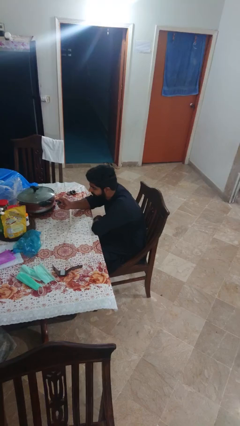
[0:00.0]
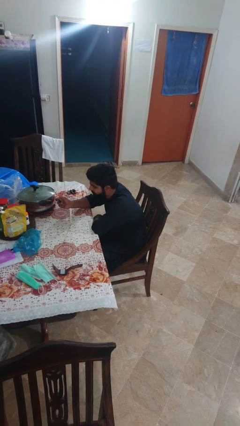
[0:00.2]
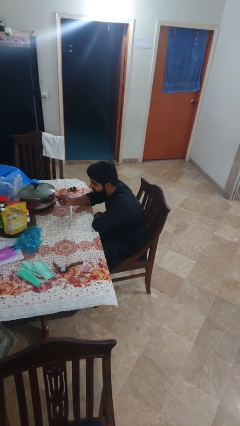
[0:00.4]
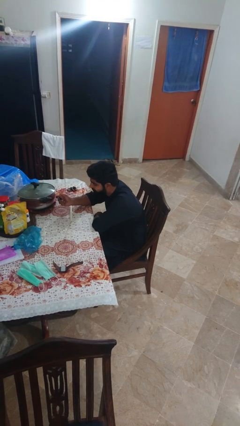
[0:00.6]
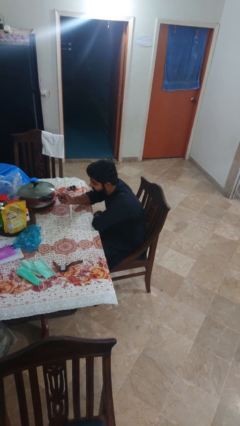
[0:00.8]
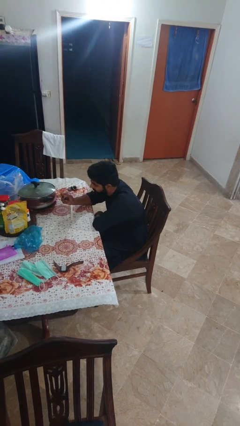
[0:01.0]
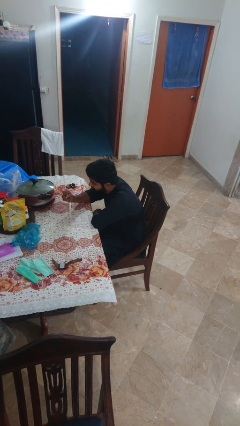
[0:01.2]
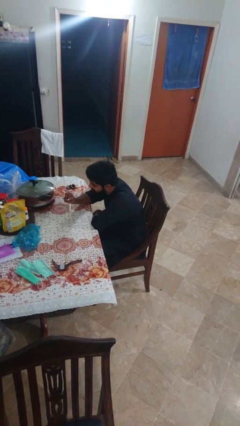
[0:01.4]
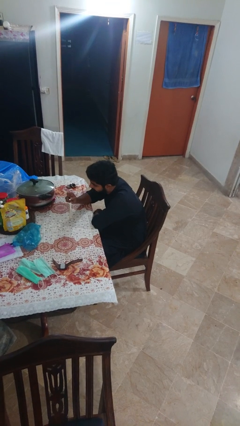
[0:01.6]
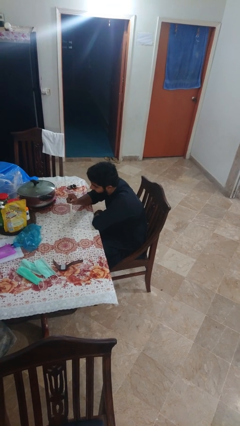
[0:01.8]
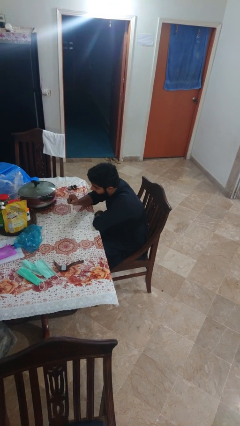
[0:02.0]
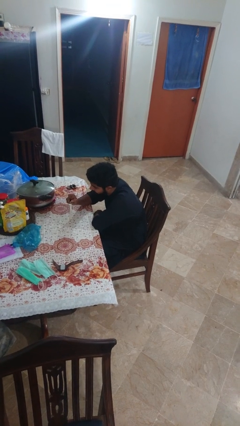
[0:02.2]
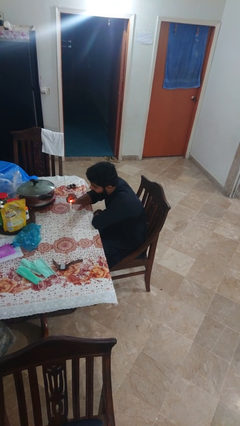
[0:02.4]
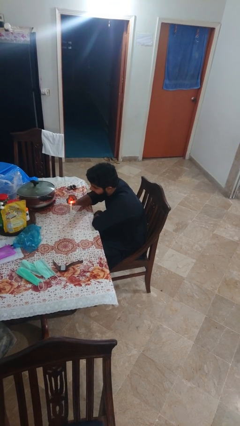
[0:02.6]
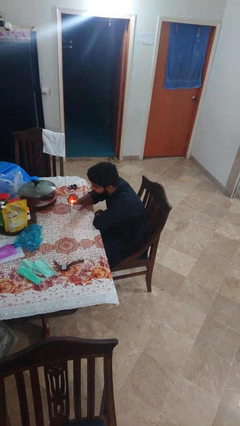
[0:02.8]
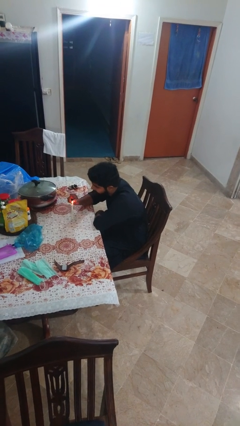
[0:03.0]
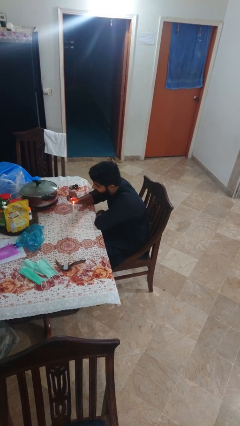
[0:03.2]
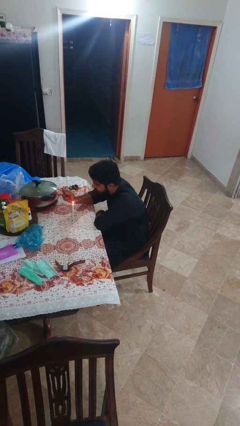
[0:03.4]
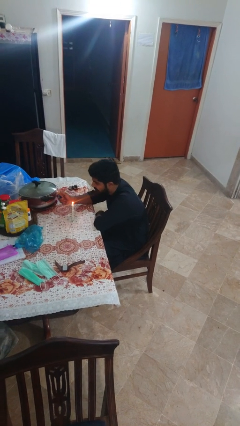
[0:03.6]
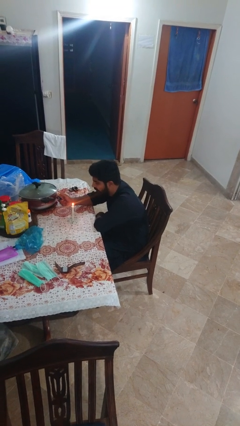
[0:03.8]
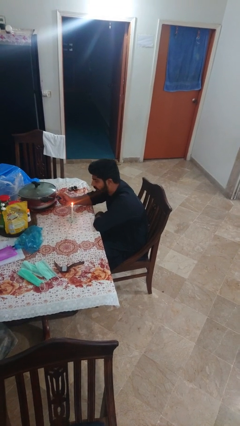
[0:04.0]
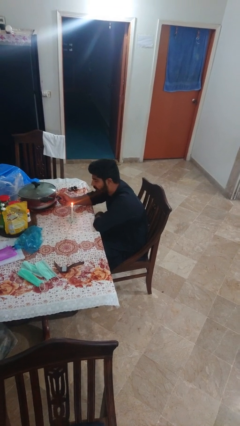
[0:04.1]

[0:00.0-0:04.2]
person lights candle

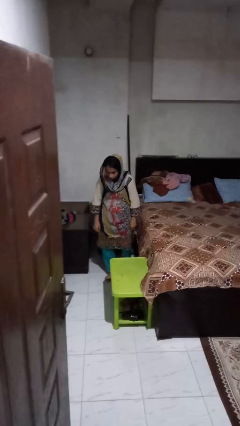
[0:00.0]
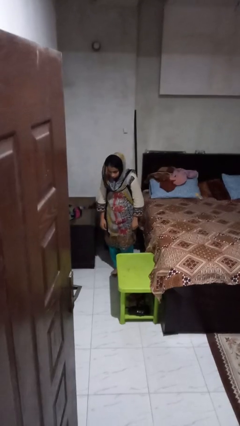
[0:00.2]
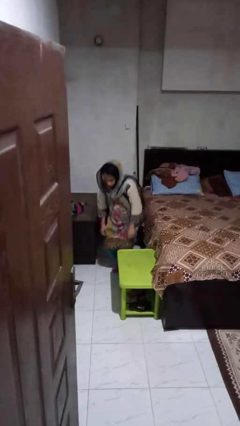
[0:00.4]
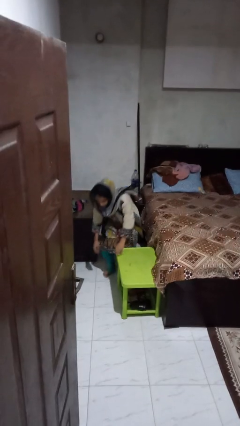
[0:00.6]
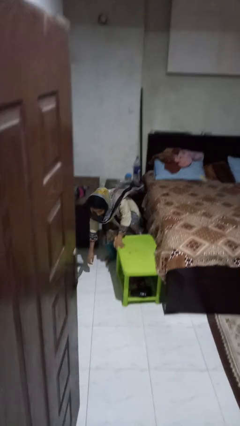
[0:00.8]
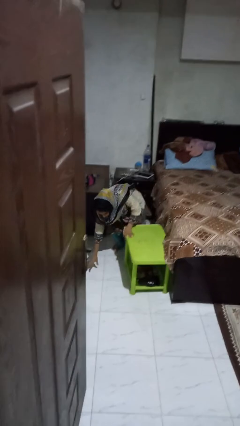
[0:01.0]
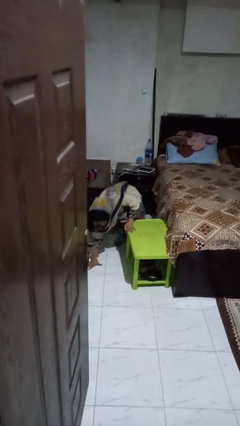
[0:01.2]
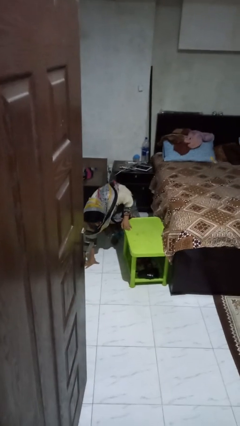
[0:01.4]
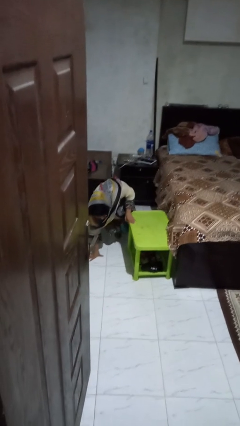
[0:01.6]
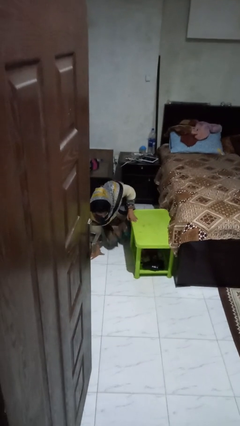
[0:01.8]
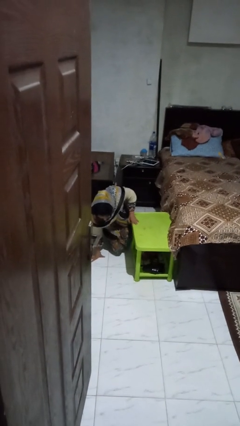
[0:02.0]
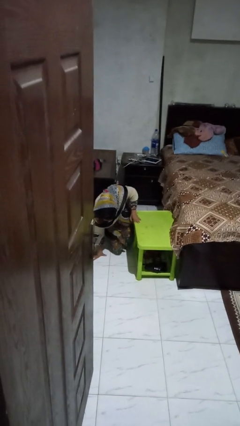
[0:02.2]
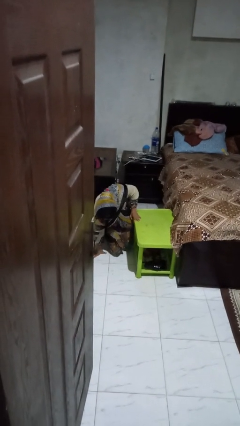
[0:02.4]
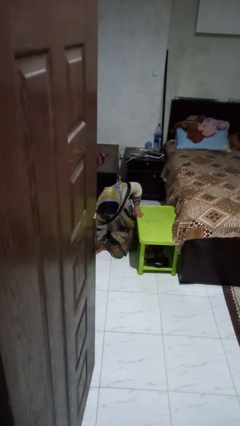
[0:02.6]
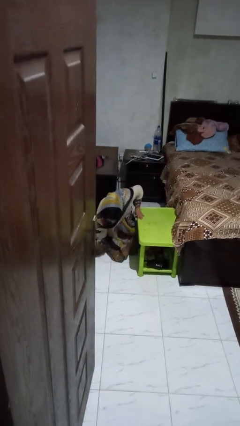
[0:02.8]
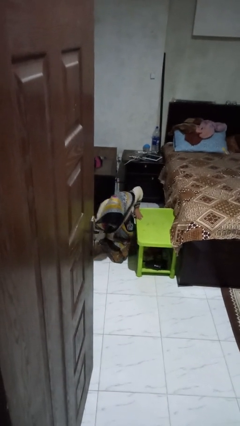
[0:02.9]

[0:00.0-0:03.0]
person trips on object on floor

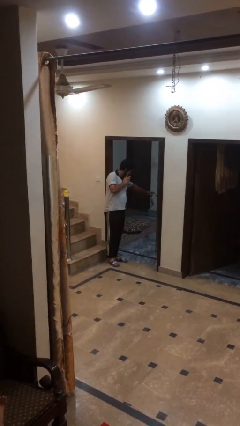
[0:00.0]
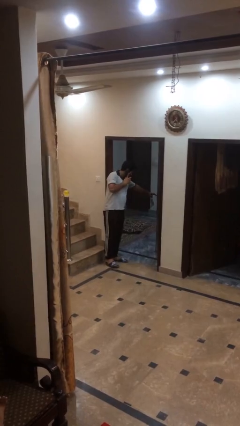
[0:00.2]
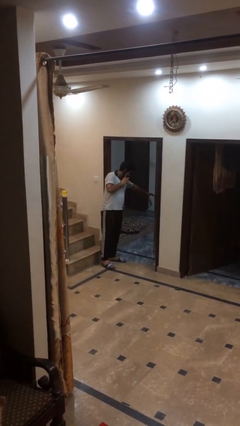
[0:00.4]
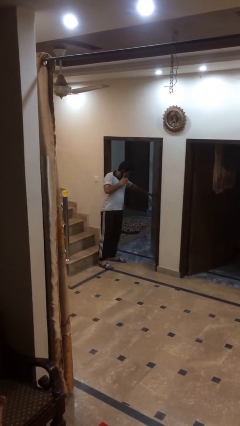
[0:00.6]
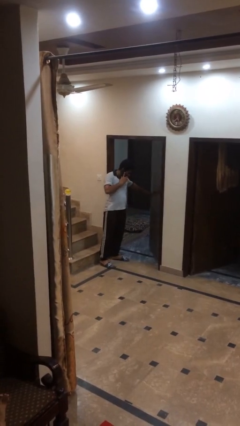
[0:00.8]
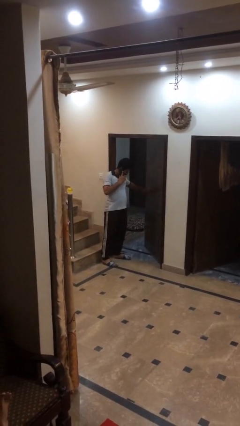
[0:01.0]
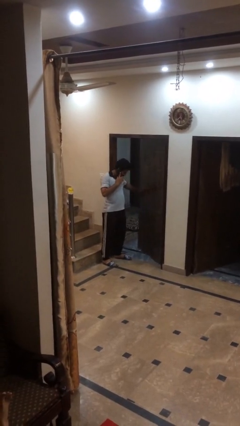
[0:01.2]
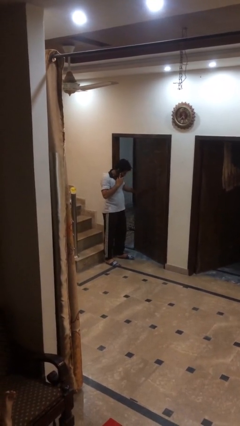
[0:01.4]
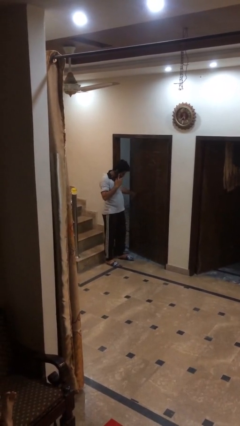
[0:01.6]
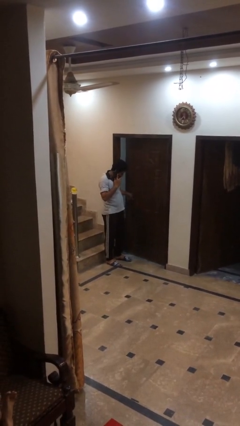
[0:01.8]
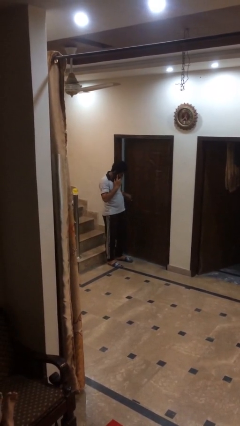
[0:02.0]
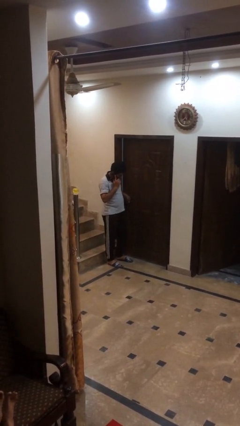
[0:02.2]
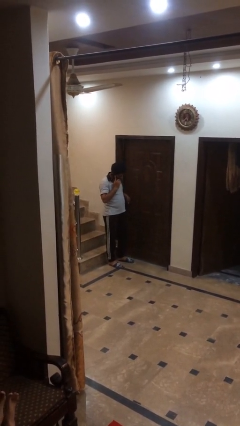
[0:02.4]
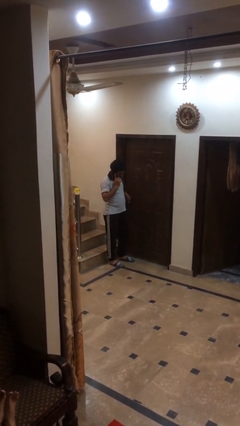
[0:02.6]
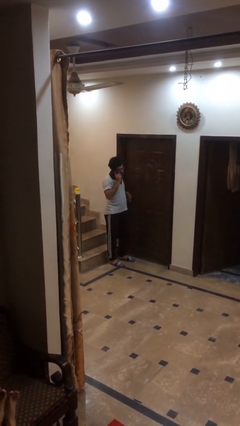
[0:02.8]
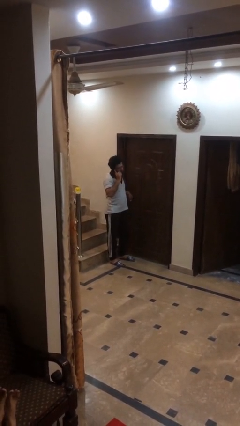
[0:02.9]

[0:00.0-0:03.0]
person closes facility door

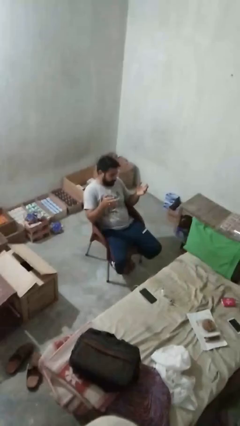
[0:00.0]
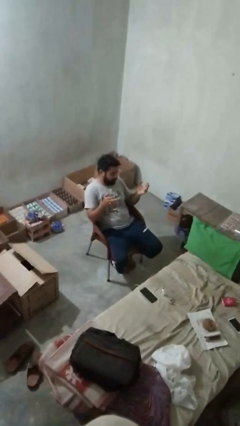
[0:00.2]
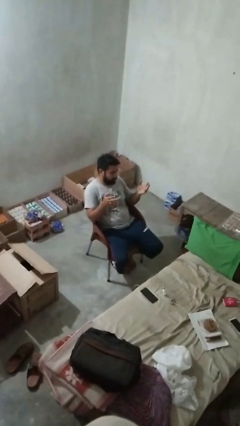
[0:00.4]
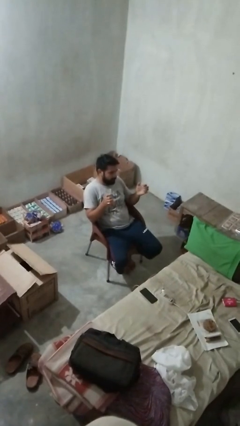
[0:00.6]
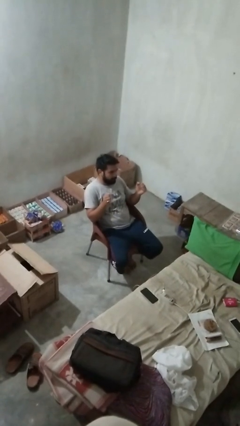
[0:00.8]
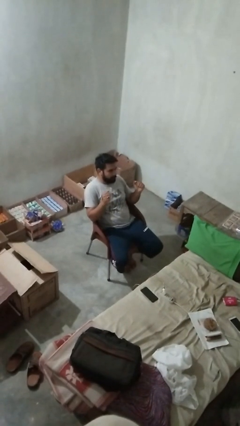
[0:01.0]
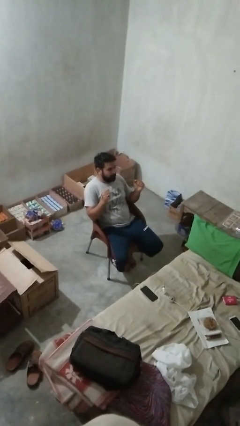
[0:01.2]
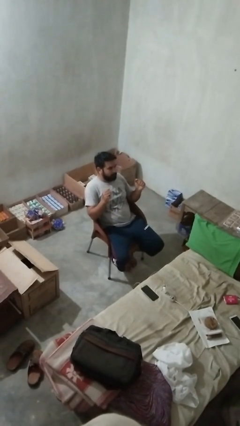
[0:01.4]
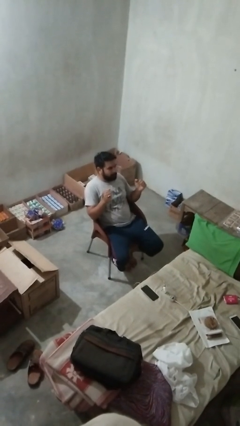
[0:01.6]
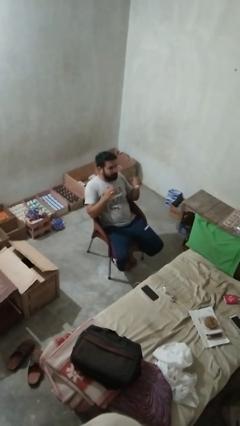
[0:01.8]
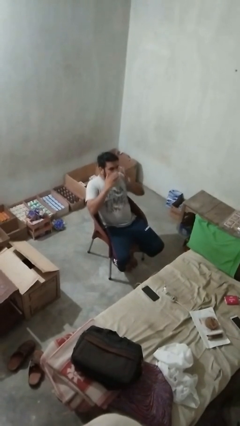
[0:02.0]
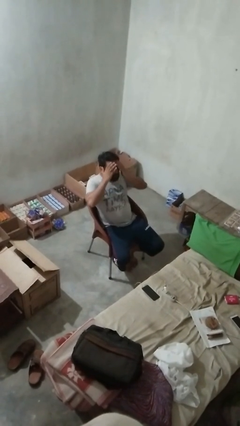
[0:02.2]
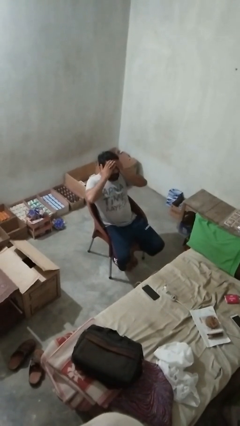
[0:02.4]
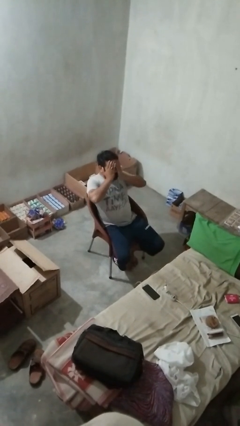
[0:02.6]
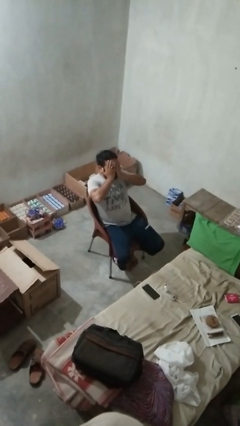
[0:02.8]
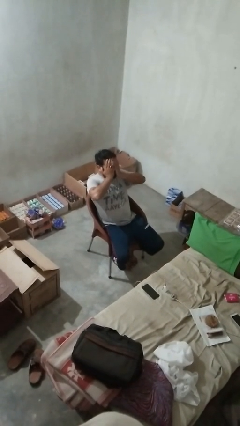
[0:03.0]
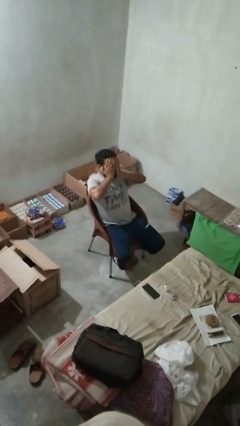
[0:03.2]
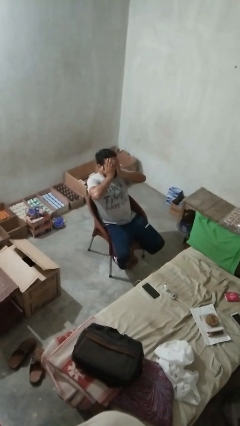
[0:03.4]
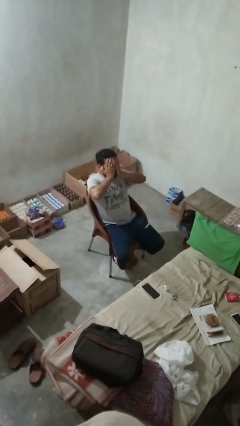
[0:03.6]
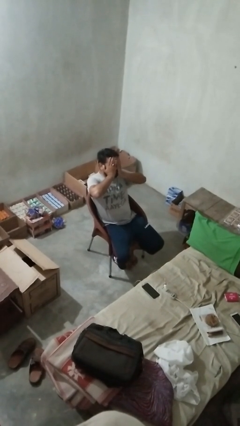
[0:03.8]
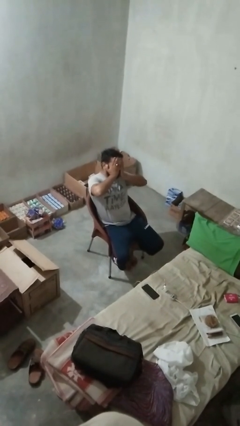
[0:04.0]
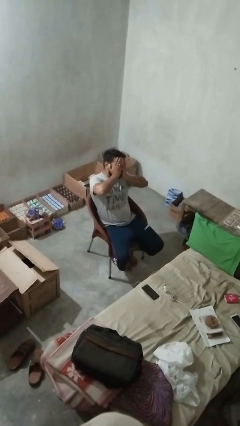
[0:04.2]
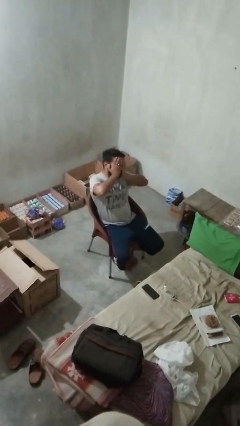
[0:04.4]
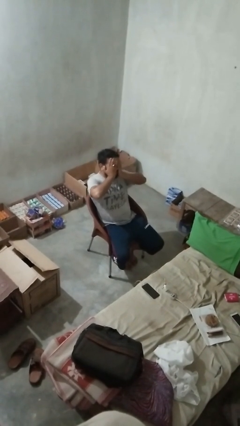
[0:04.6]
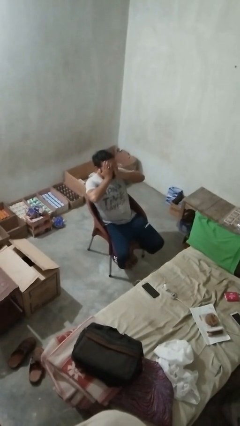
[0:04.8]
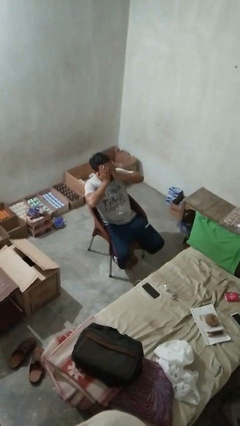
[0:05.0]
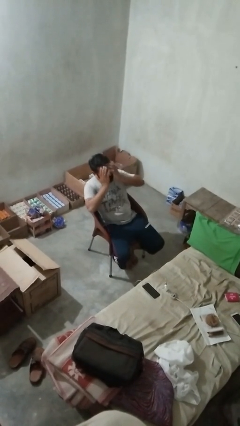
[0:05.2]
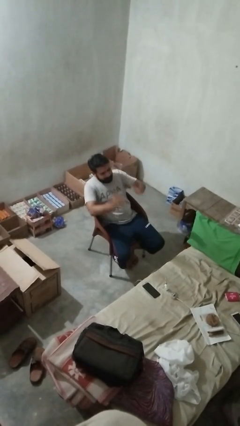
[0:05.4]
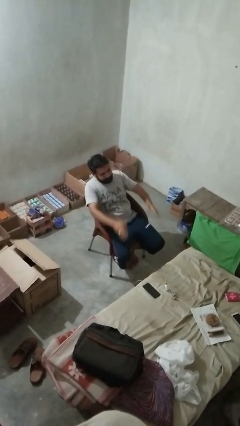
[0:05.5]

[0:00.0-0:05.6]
person covers face with hands

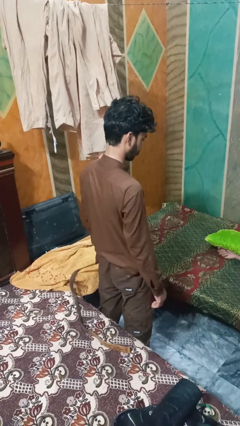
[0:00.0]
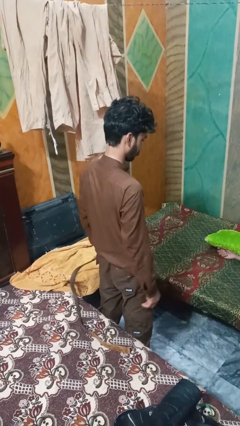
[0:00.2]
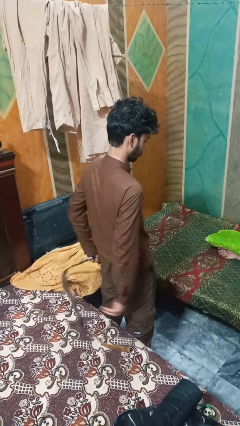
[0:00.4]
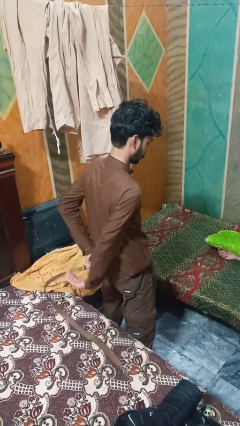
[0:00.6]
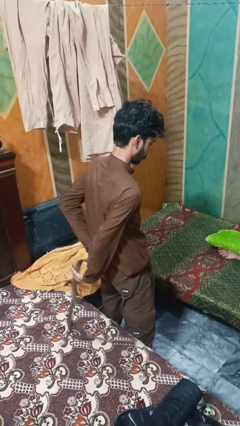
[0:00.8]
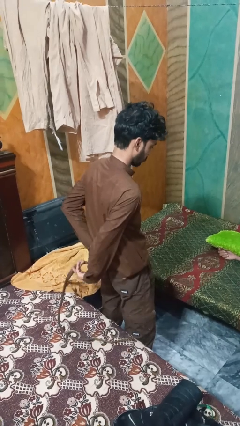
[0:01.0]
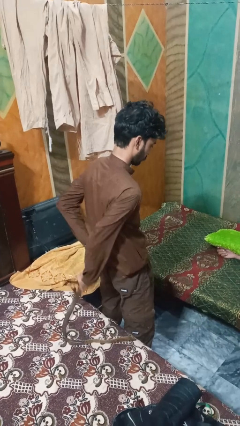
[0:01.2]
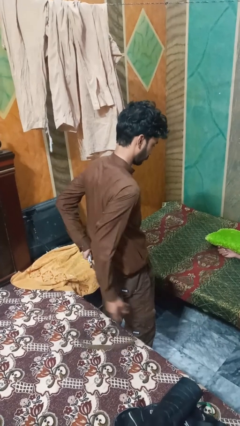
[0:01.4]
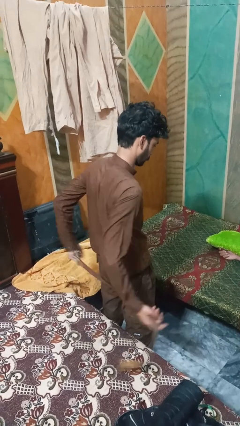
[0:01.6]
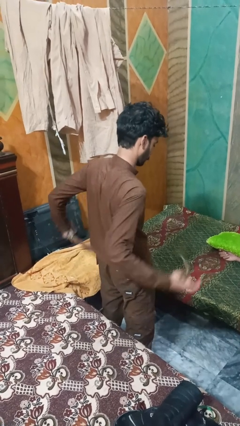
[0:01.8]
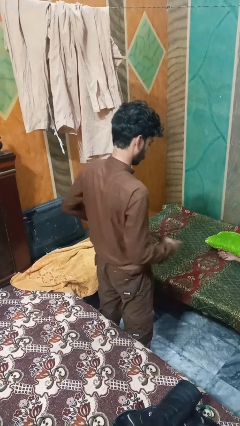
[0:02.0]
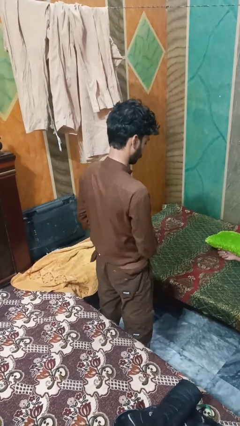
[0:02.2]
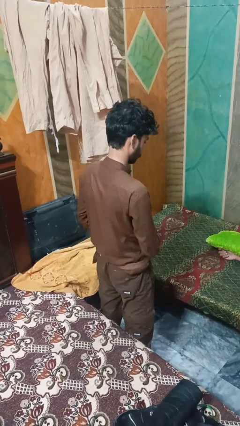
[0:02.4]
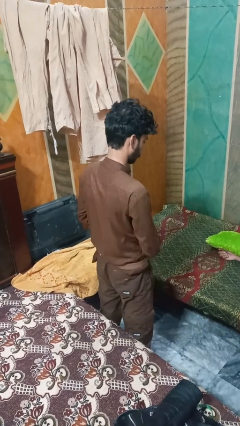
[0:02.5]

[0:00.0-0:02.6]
person puts on belt
